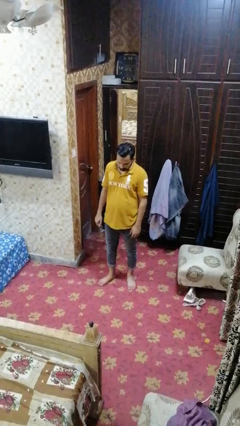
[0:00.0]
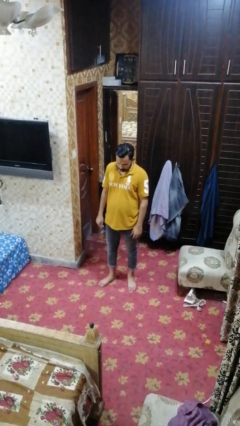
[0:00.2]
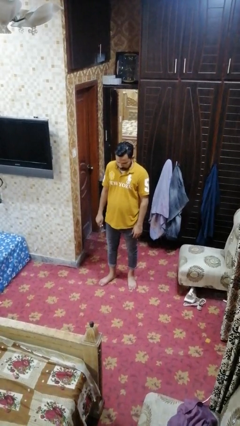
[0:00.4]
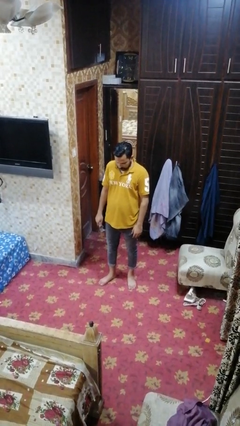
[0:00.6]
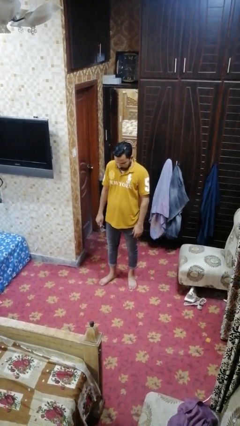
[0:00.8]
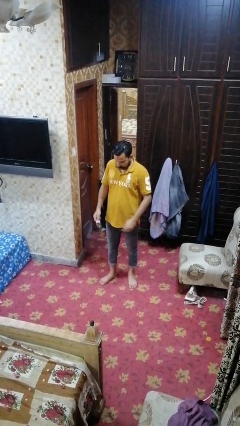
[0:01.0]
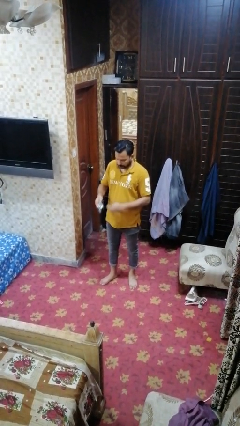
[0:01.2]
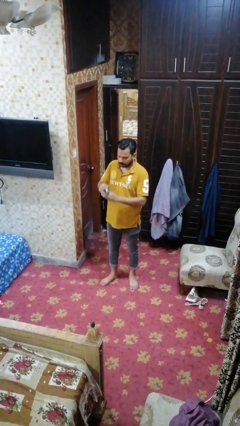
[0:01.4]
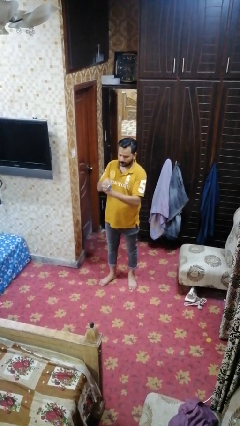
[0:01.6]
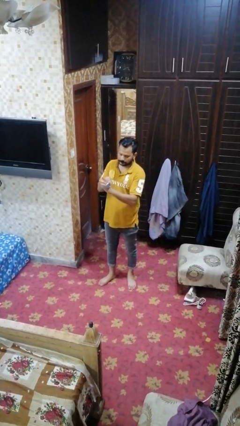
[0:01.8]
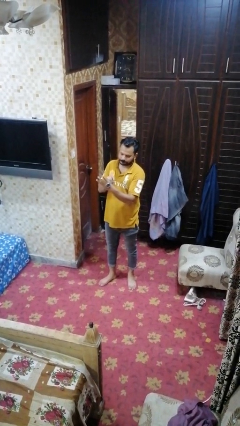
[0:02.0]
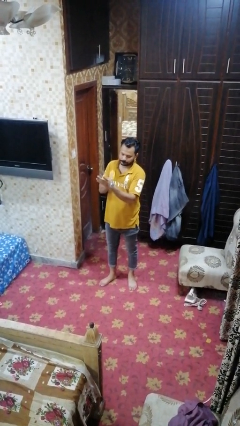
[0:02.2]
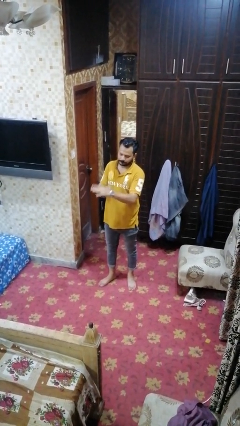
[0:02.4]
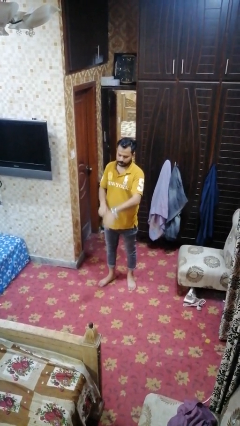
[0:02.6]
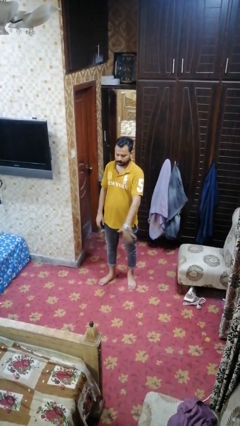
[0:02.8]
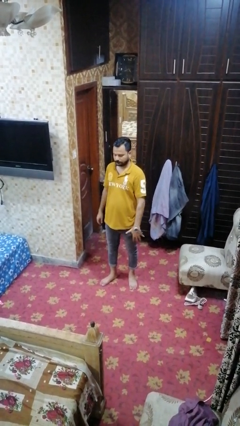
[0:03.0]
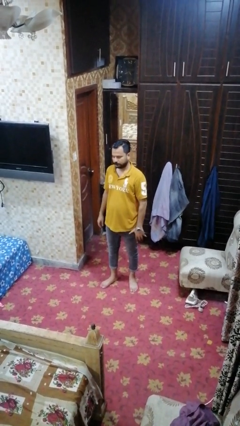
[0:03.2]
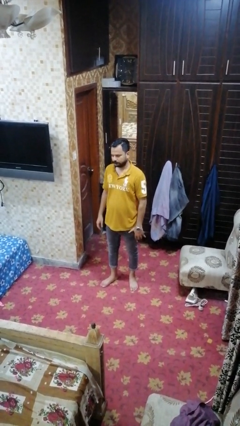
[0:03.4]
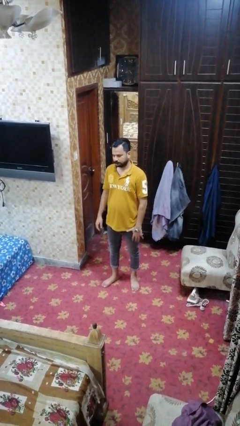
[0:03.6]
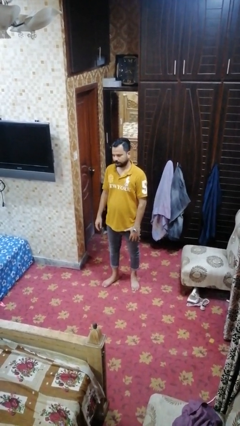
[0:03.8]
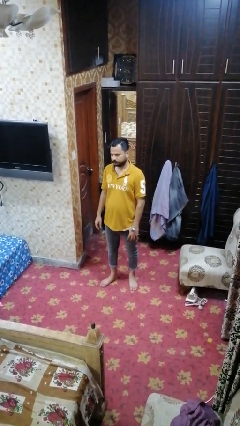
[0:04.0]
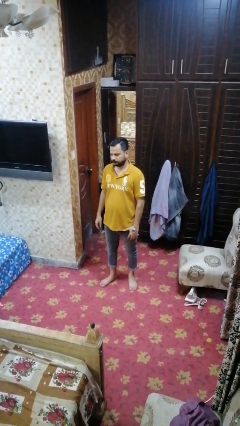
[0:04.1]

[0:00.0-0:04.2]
person puts on wristwatch

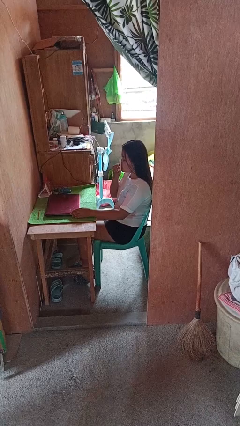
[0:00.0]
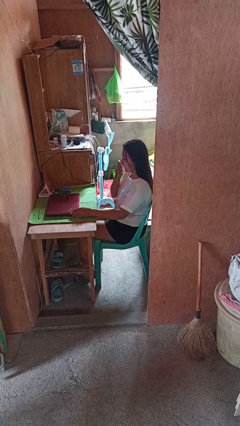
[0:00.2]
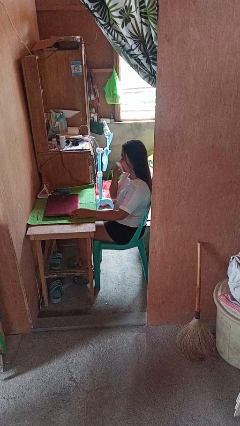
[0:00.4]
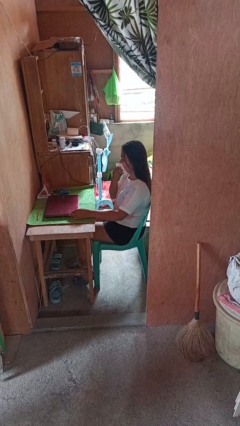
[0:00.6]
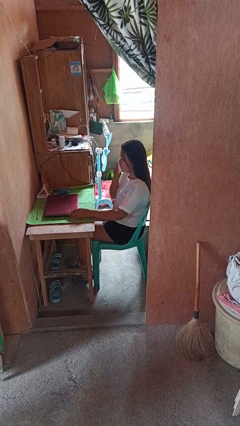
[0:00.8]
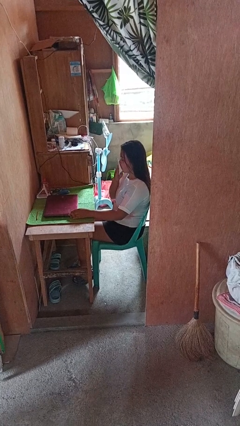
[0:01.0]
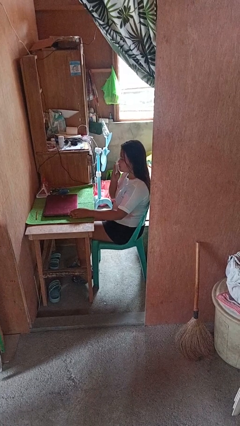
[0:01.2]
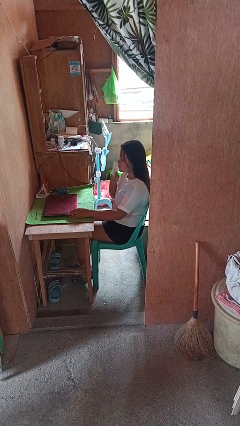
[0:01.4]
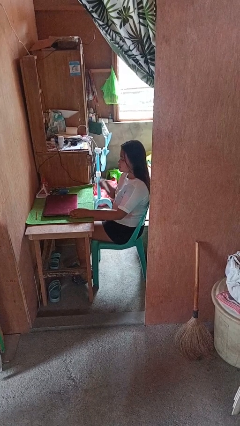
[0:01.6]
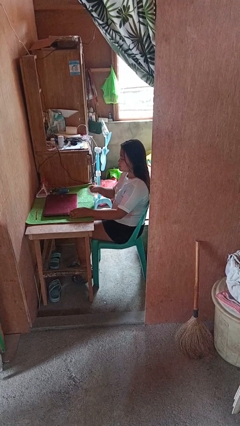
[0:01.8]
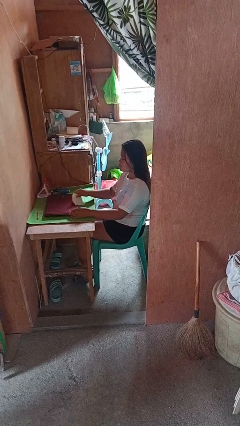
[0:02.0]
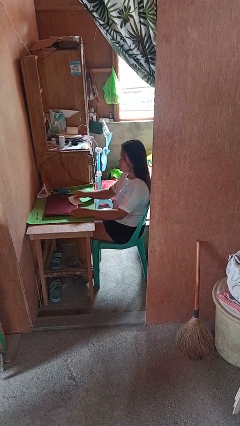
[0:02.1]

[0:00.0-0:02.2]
person wipes mouth with napkin

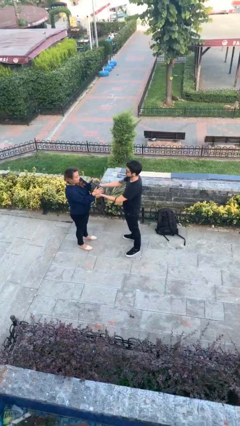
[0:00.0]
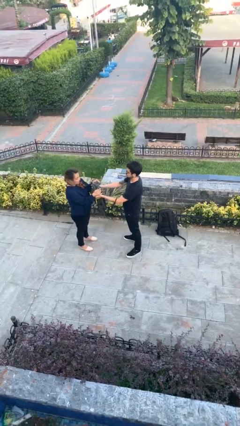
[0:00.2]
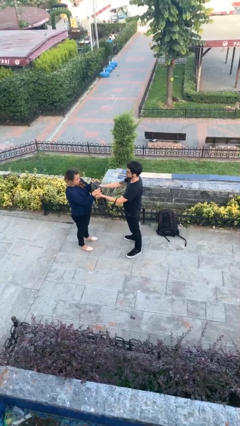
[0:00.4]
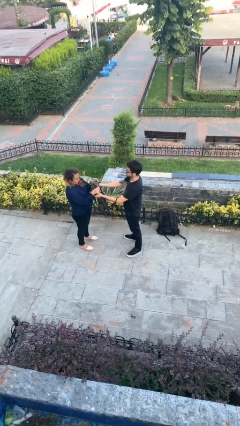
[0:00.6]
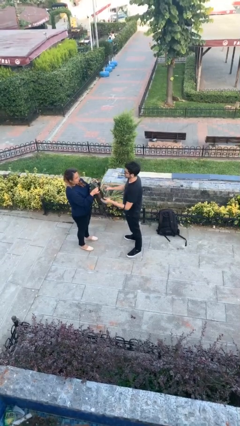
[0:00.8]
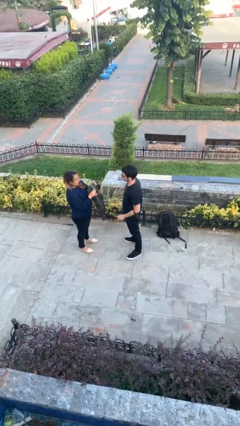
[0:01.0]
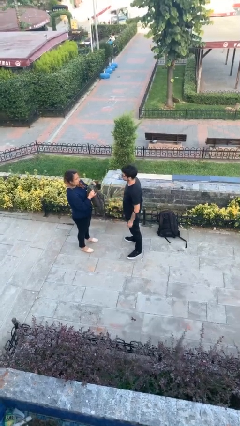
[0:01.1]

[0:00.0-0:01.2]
person transfers object to person

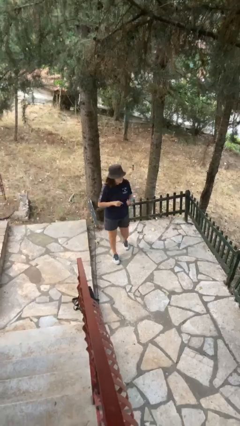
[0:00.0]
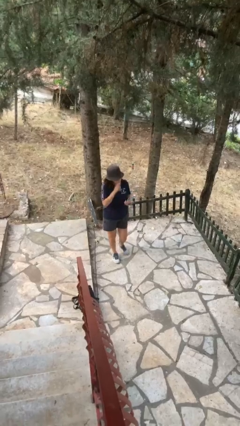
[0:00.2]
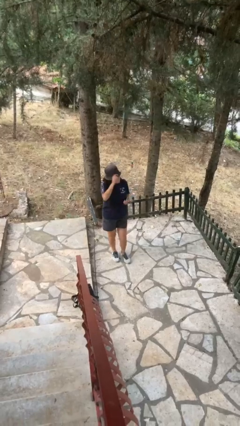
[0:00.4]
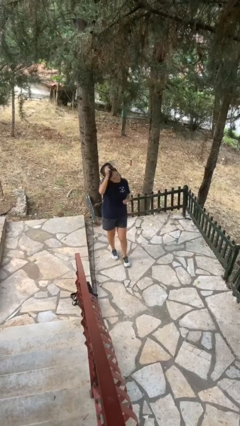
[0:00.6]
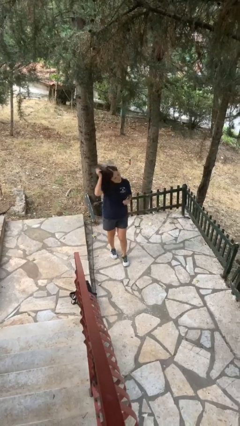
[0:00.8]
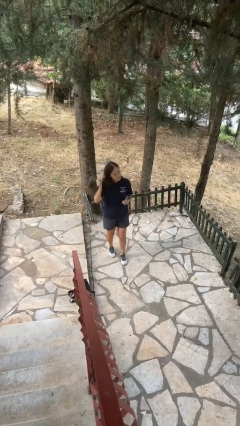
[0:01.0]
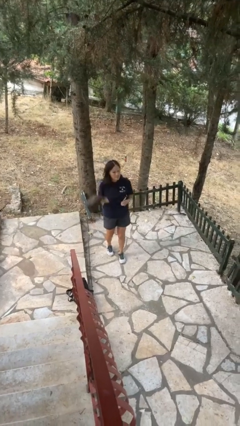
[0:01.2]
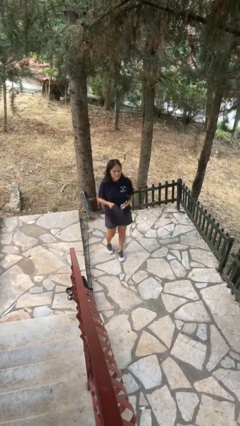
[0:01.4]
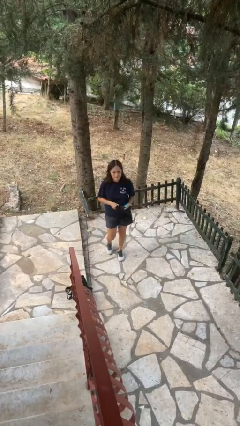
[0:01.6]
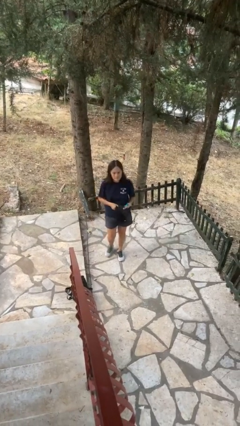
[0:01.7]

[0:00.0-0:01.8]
person takes off hat

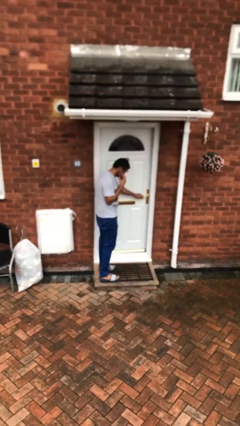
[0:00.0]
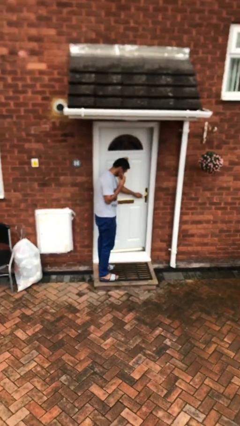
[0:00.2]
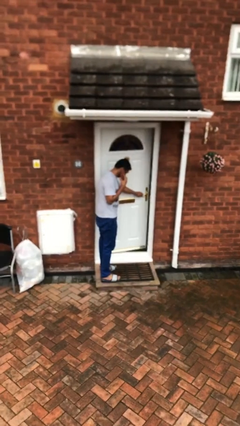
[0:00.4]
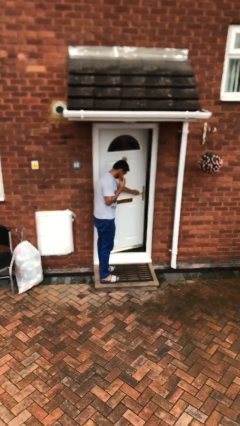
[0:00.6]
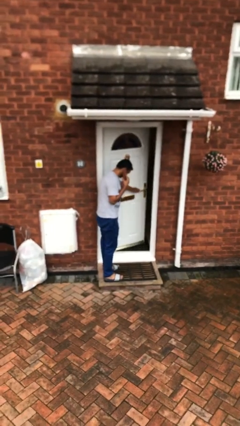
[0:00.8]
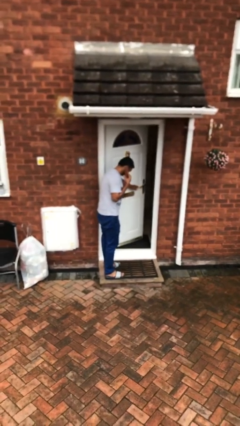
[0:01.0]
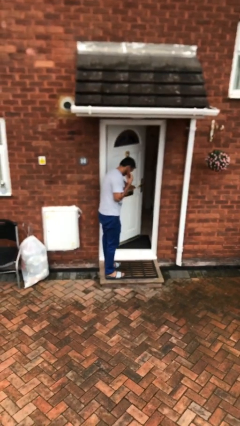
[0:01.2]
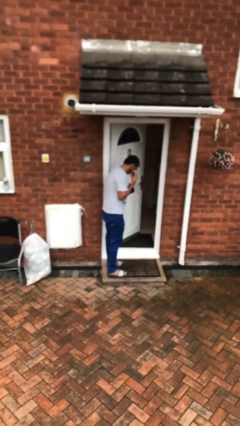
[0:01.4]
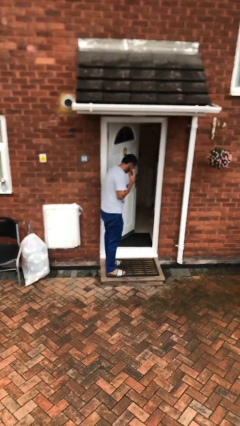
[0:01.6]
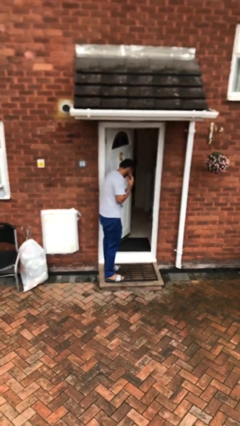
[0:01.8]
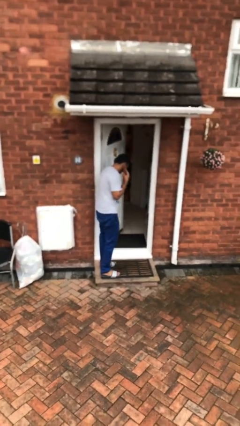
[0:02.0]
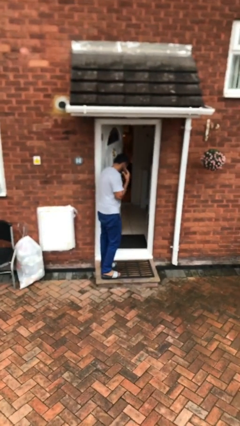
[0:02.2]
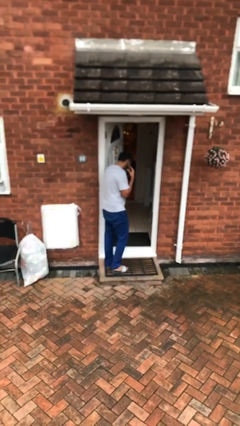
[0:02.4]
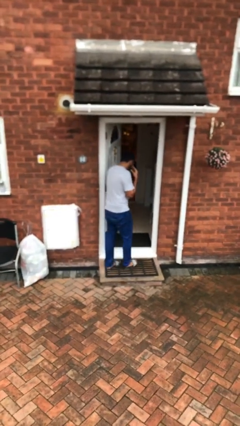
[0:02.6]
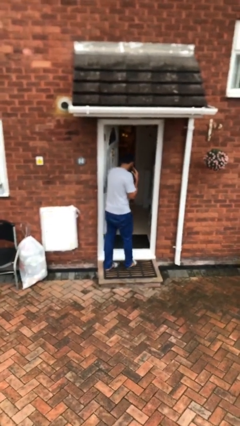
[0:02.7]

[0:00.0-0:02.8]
person opens facility door

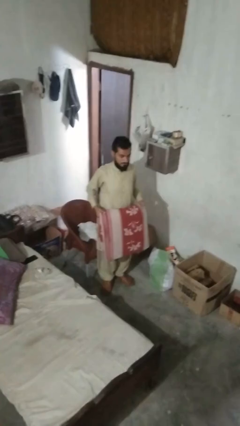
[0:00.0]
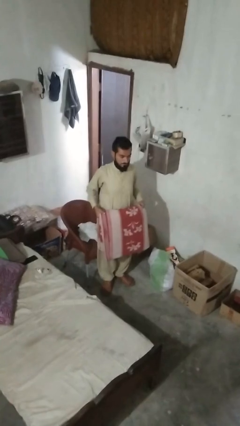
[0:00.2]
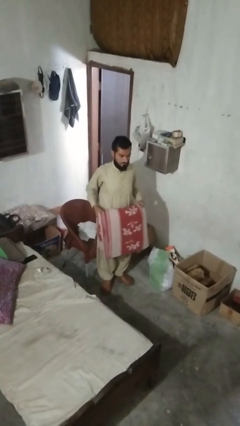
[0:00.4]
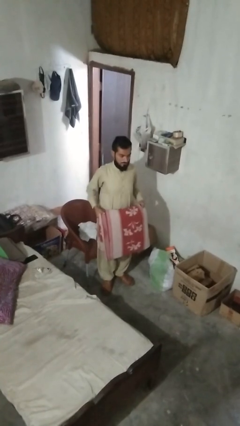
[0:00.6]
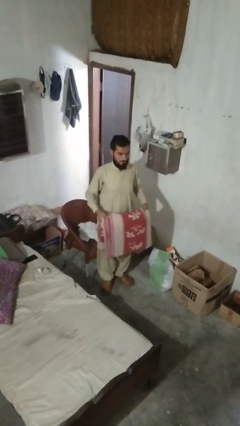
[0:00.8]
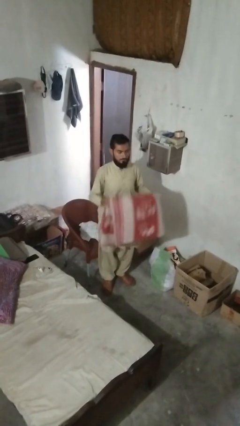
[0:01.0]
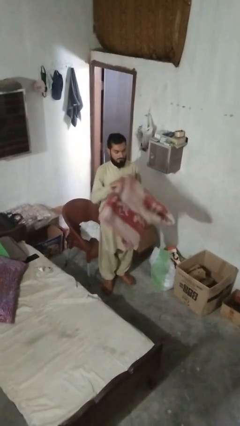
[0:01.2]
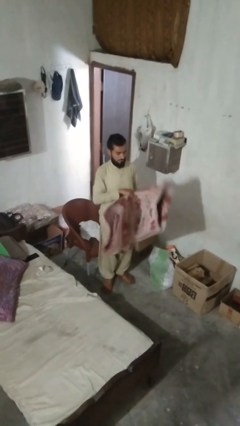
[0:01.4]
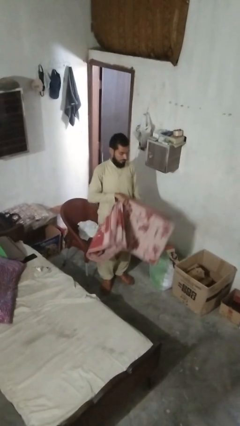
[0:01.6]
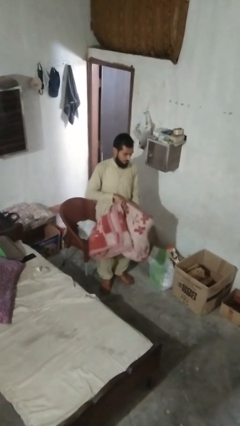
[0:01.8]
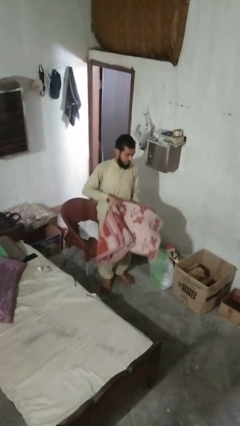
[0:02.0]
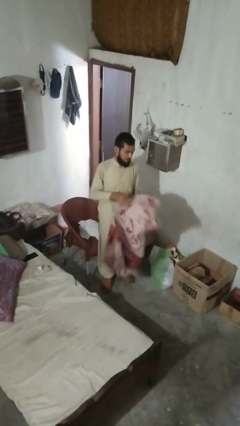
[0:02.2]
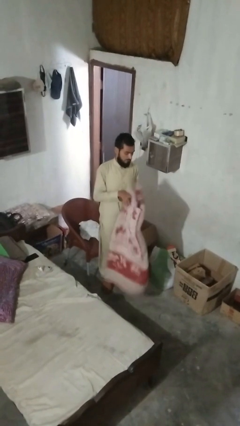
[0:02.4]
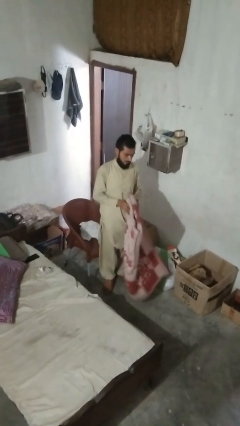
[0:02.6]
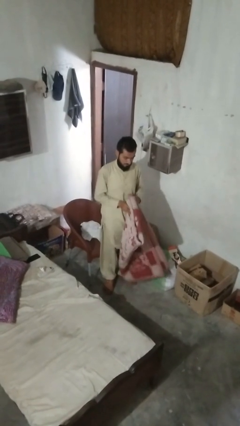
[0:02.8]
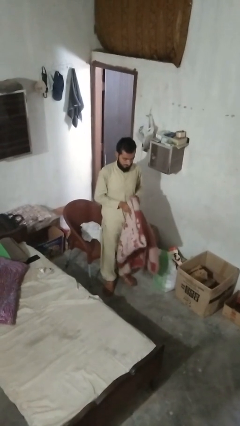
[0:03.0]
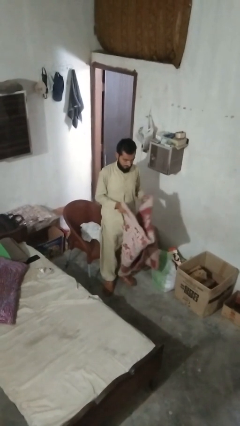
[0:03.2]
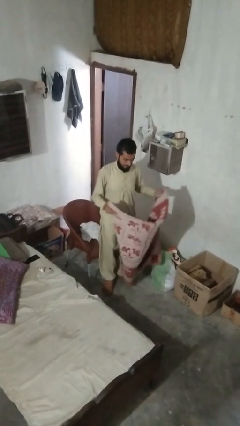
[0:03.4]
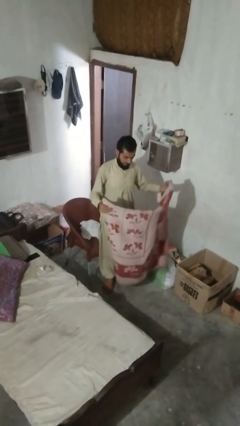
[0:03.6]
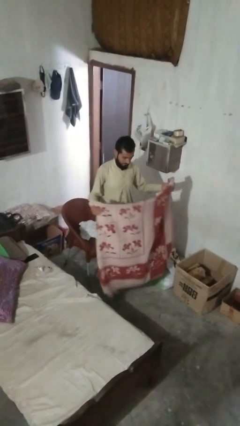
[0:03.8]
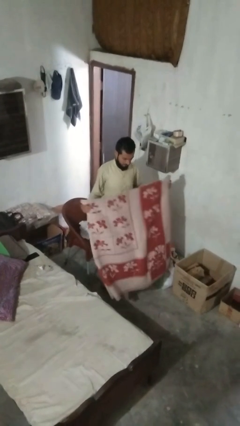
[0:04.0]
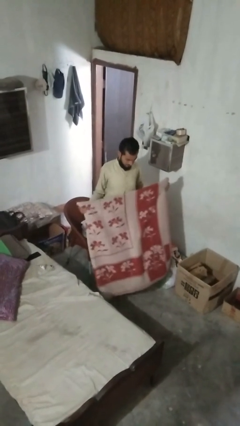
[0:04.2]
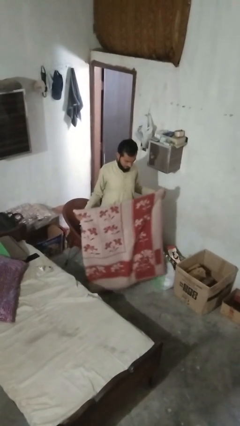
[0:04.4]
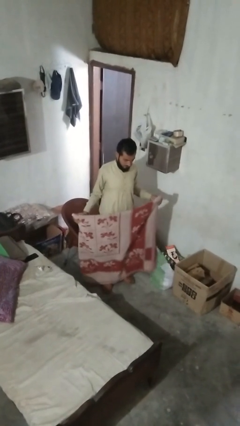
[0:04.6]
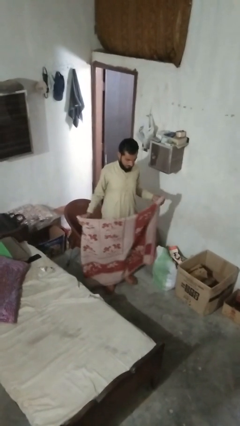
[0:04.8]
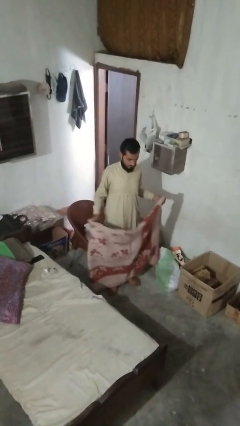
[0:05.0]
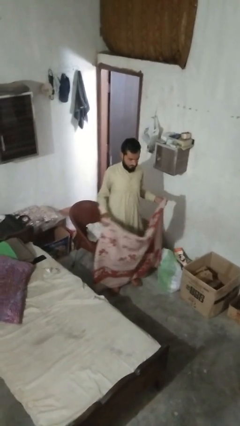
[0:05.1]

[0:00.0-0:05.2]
person unfolds blanket
